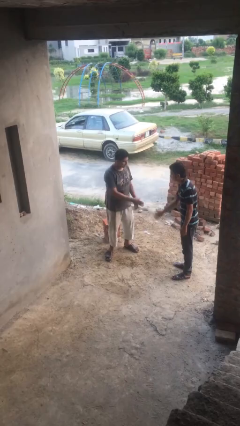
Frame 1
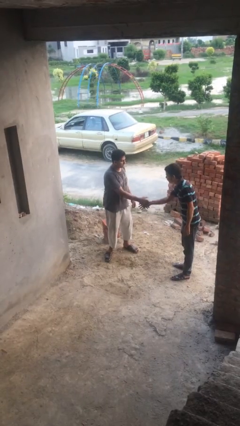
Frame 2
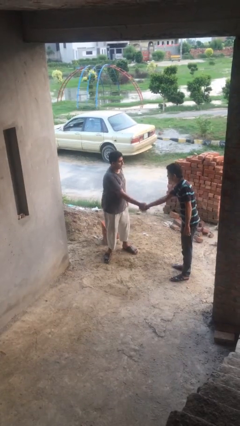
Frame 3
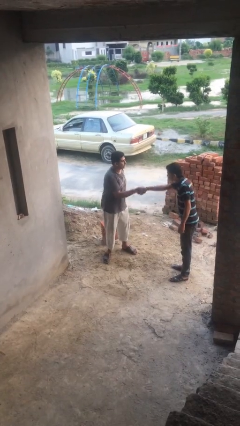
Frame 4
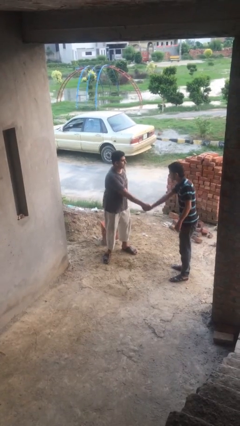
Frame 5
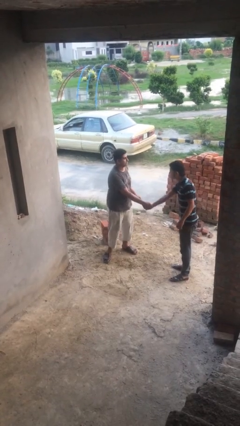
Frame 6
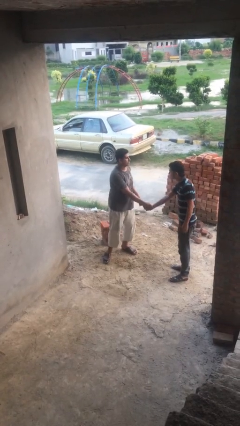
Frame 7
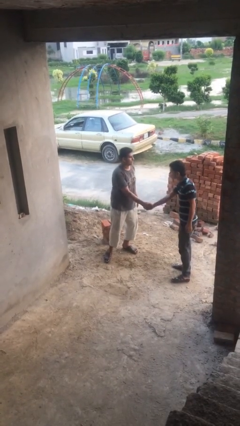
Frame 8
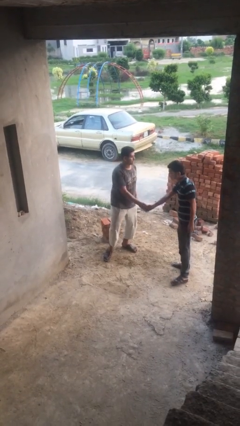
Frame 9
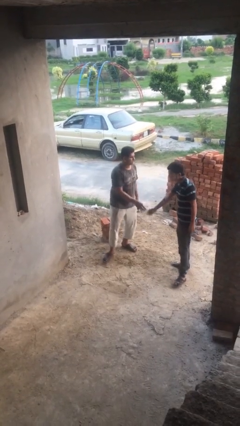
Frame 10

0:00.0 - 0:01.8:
person shakes hand

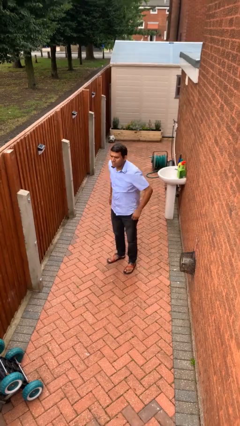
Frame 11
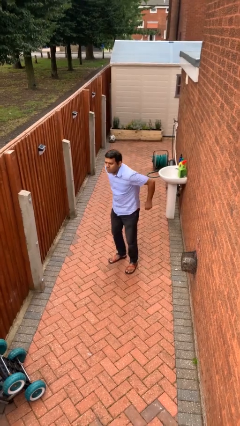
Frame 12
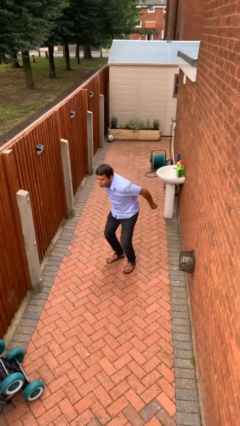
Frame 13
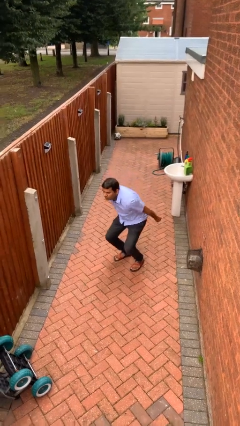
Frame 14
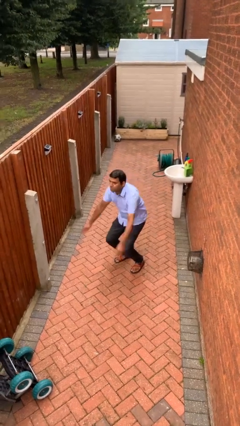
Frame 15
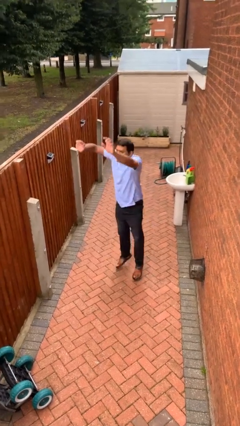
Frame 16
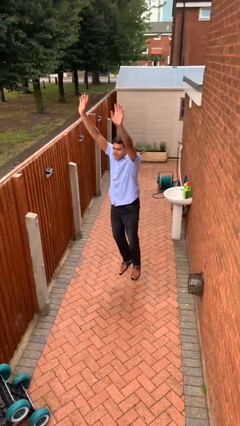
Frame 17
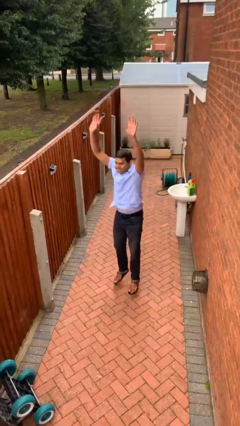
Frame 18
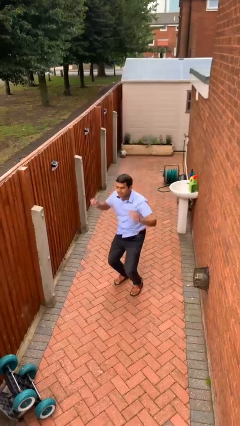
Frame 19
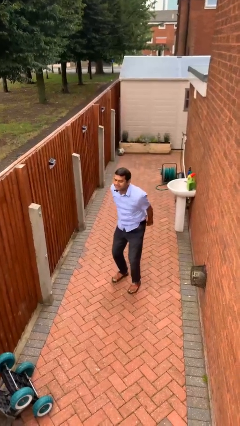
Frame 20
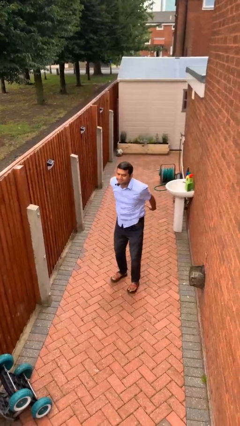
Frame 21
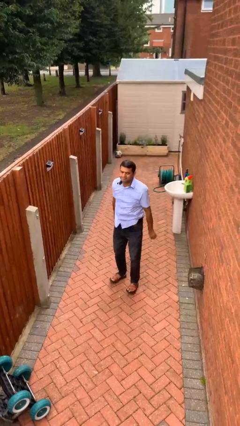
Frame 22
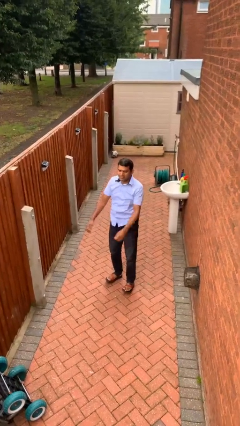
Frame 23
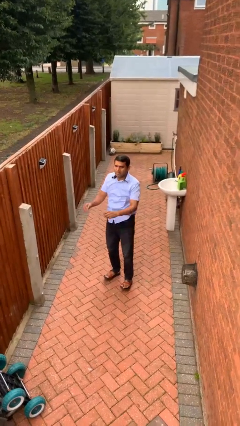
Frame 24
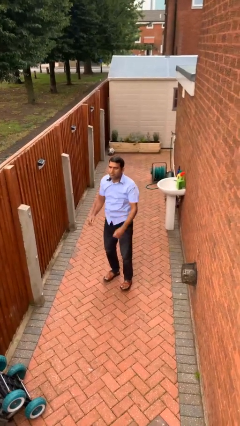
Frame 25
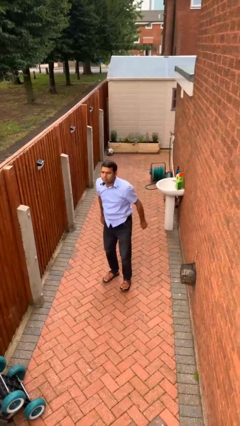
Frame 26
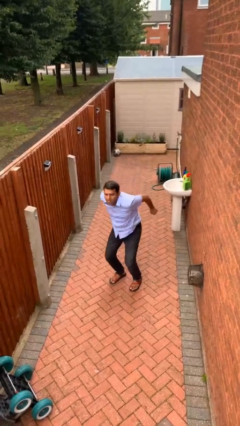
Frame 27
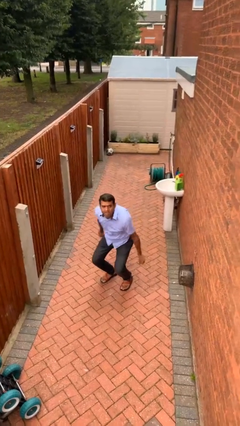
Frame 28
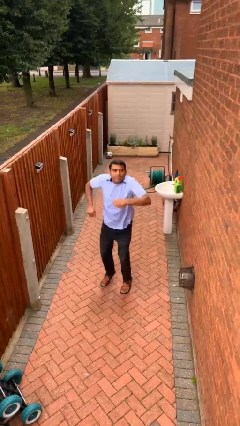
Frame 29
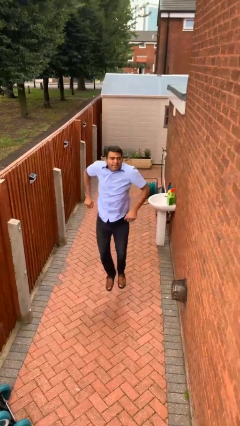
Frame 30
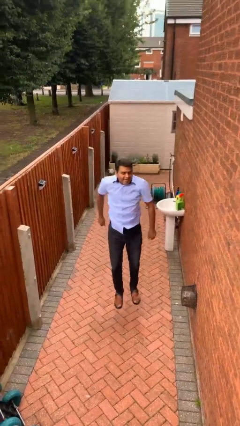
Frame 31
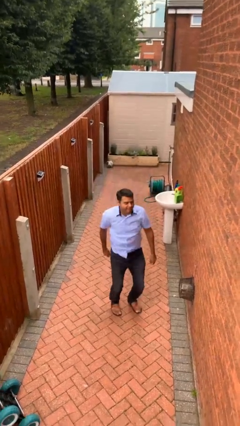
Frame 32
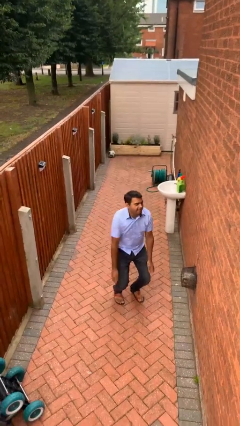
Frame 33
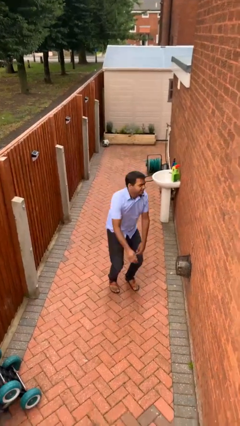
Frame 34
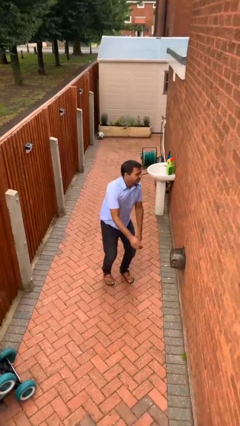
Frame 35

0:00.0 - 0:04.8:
person jumps

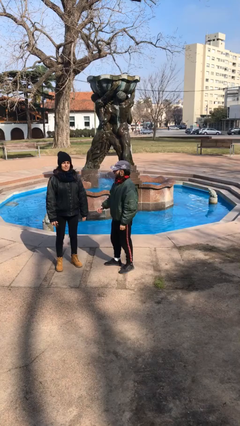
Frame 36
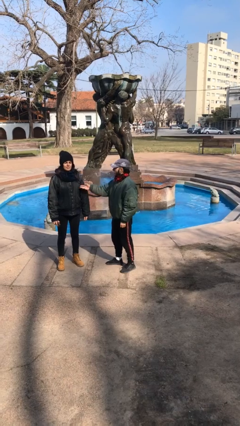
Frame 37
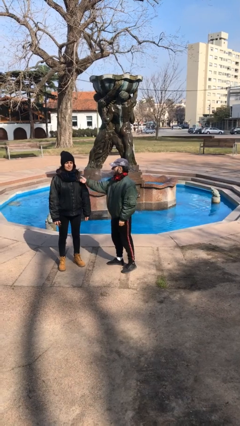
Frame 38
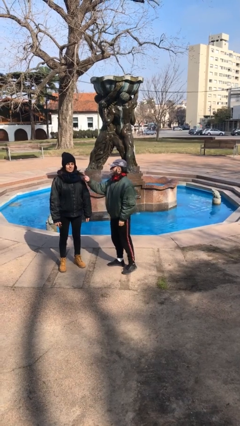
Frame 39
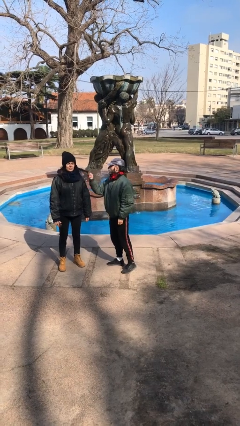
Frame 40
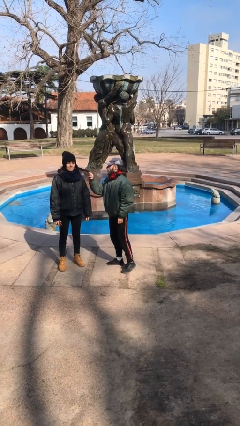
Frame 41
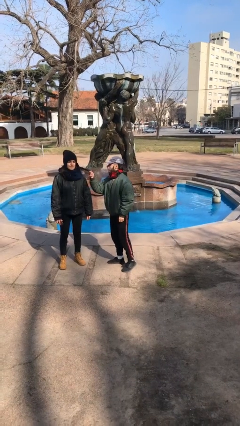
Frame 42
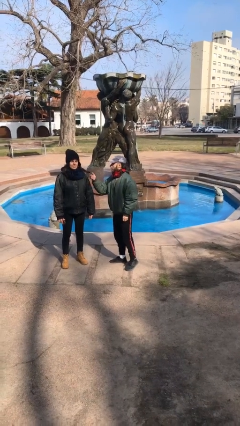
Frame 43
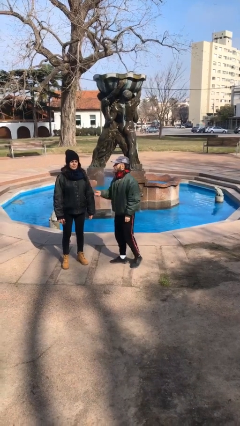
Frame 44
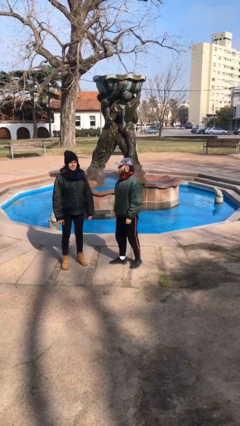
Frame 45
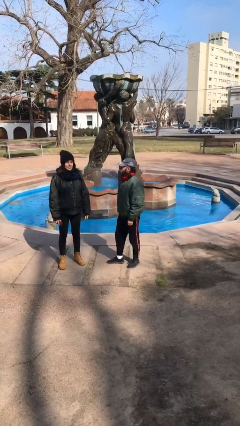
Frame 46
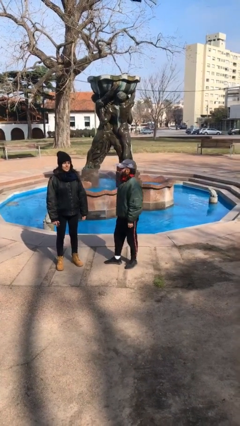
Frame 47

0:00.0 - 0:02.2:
person grabs person by hair

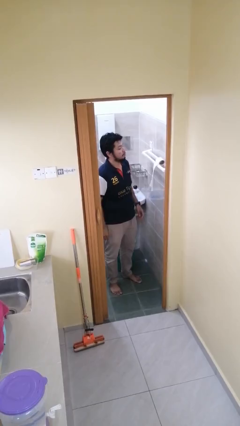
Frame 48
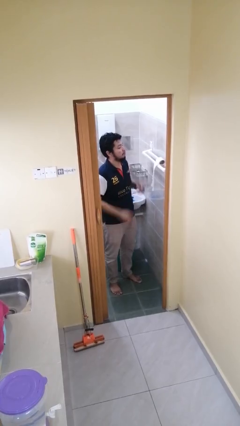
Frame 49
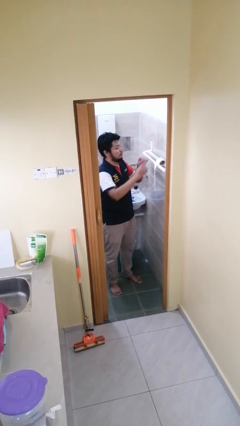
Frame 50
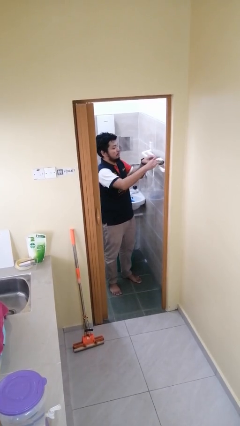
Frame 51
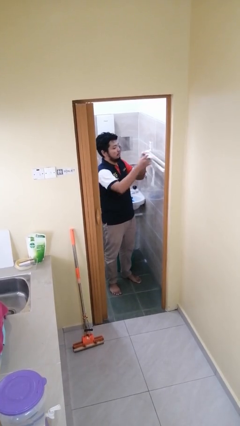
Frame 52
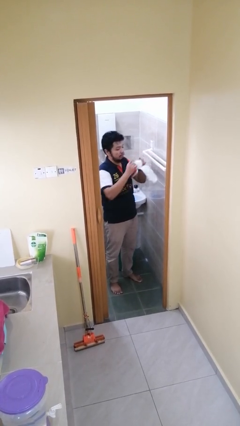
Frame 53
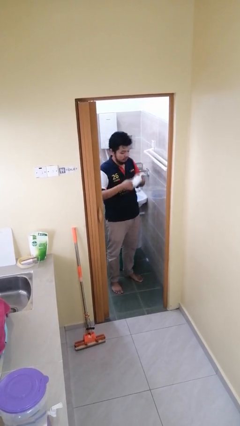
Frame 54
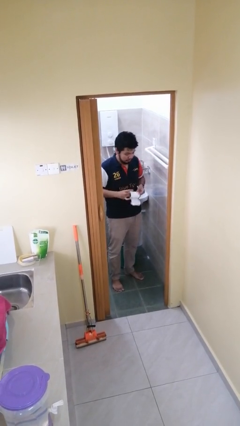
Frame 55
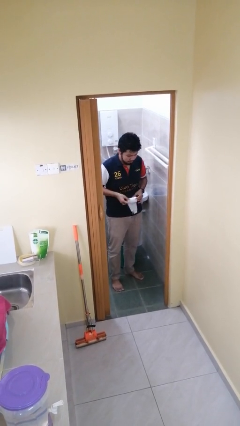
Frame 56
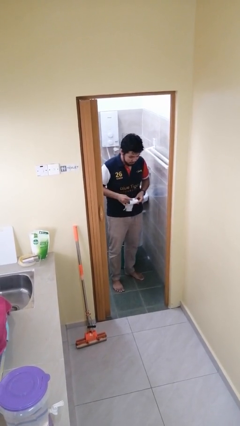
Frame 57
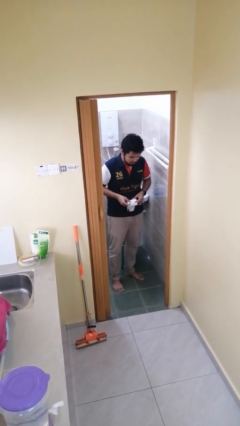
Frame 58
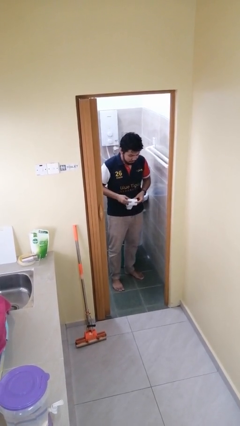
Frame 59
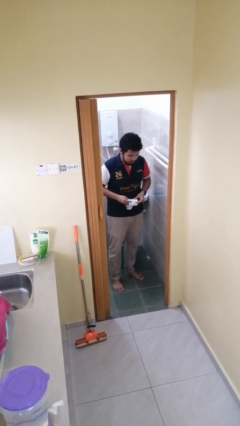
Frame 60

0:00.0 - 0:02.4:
person picks up object from countertop

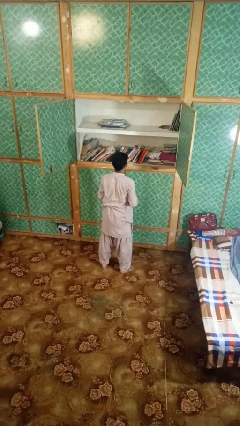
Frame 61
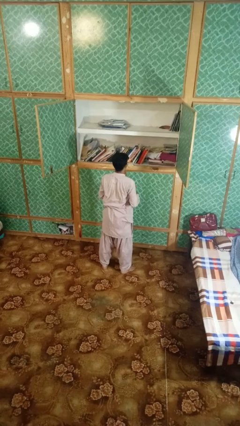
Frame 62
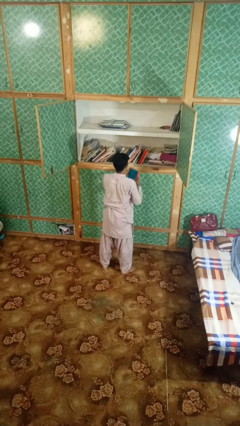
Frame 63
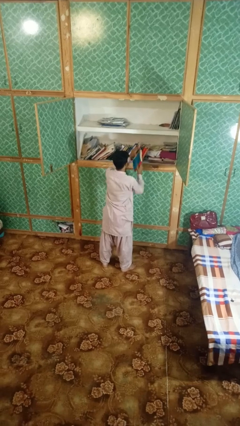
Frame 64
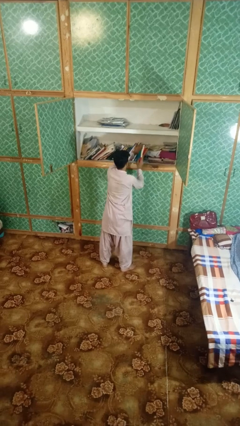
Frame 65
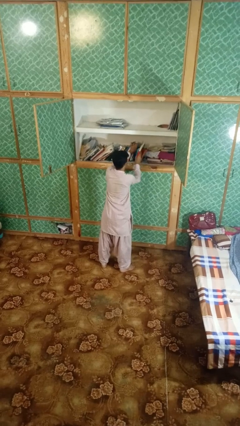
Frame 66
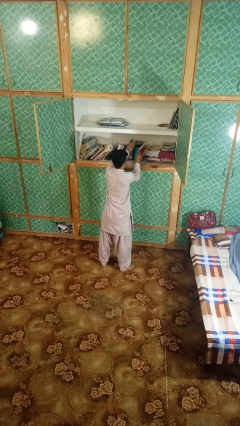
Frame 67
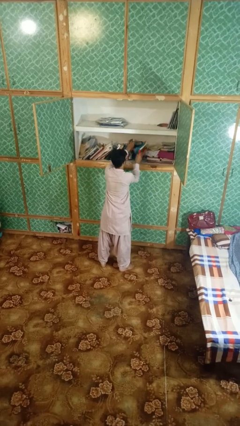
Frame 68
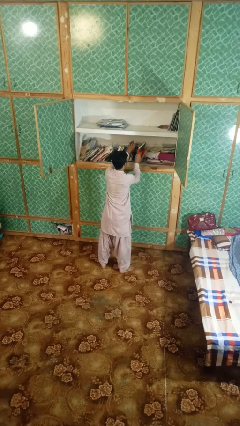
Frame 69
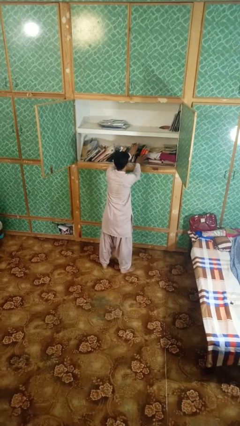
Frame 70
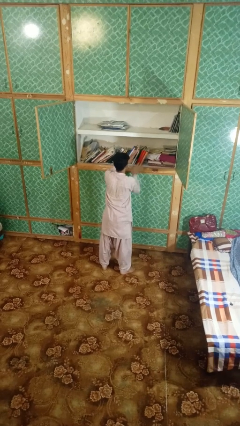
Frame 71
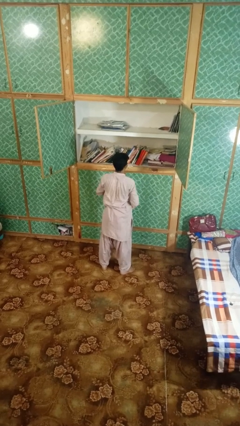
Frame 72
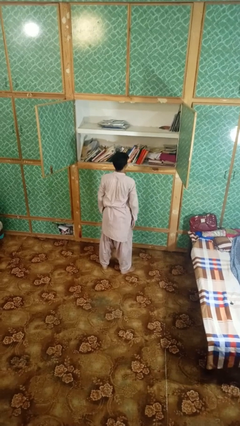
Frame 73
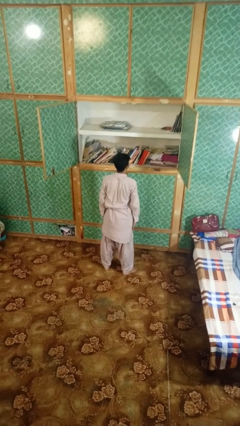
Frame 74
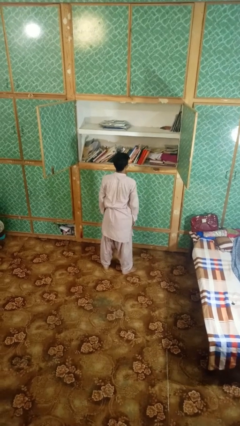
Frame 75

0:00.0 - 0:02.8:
person puts down object on shelf

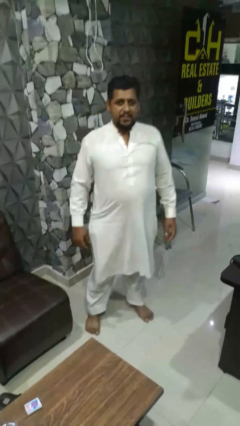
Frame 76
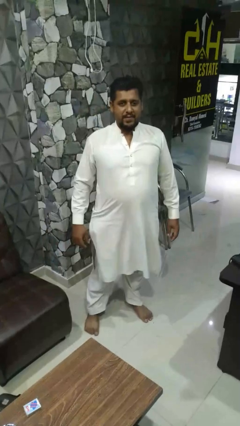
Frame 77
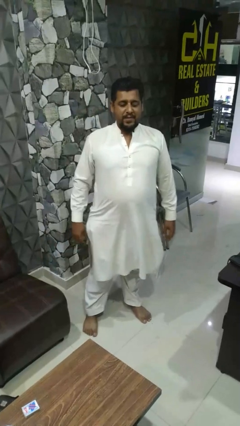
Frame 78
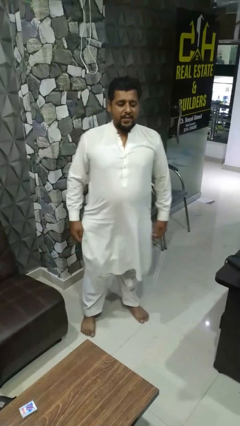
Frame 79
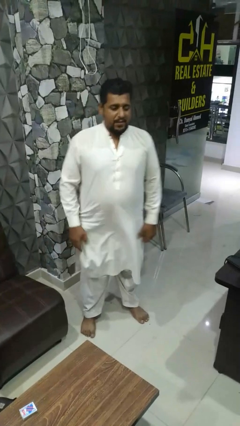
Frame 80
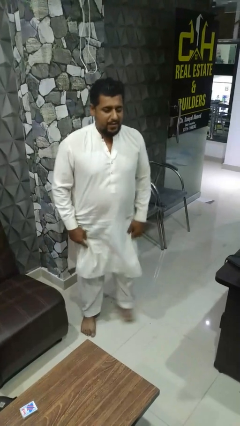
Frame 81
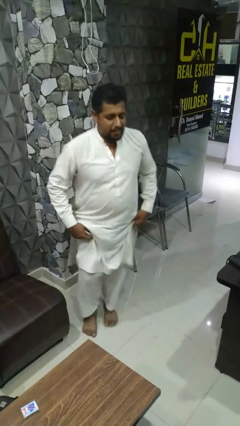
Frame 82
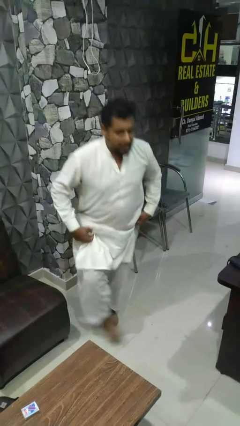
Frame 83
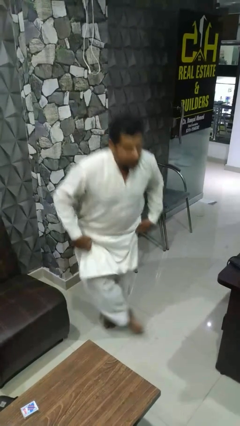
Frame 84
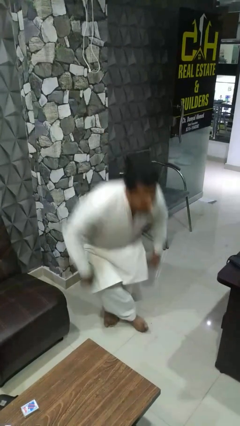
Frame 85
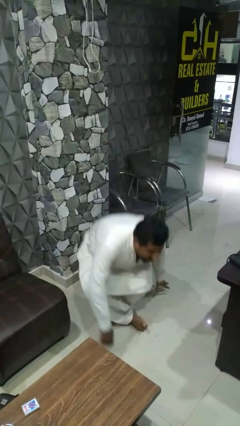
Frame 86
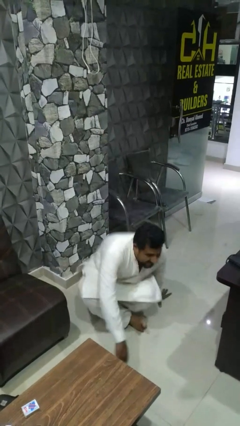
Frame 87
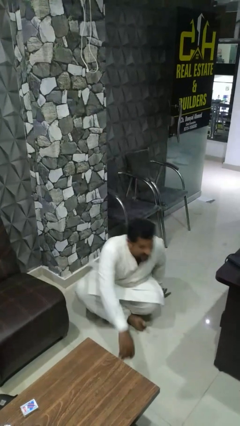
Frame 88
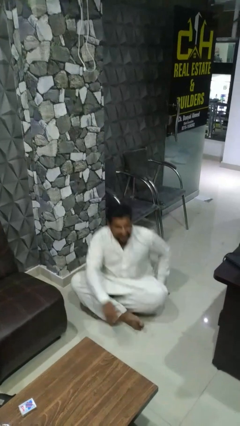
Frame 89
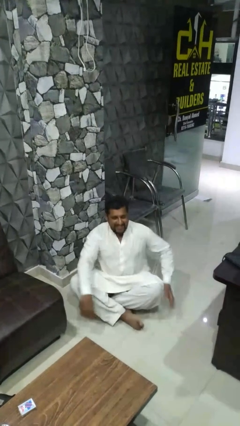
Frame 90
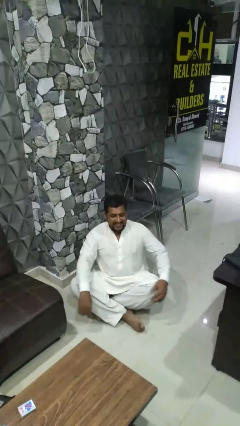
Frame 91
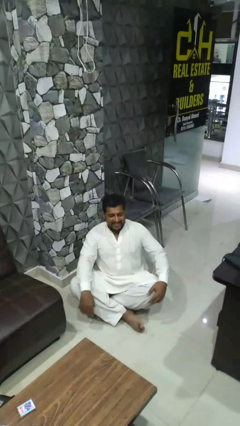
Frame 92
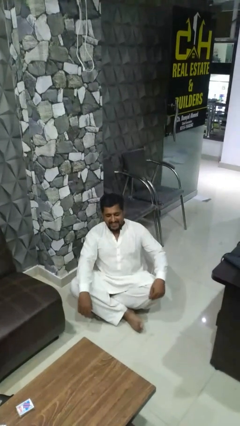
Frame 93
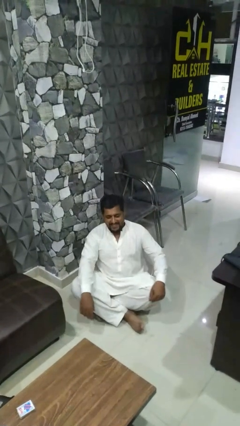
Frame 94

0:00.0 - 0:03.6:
person sits crisscross
